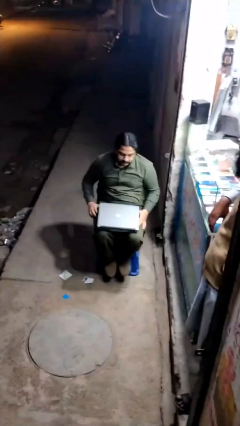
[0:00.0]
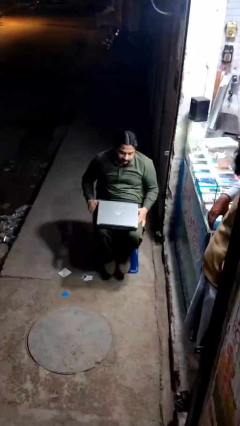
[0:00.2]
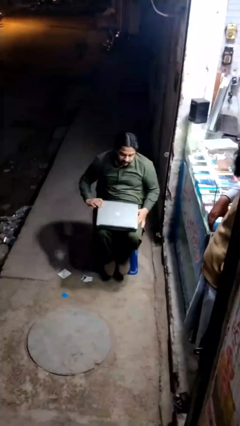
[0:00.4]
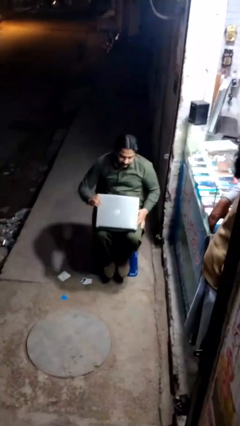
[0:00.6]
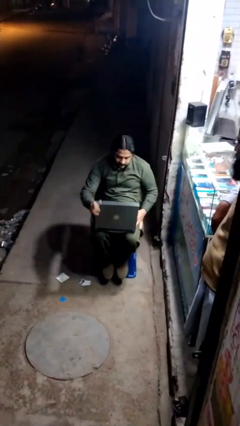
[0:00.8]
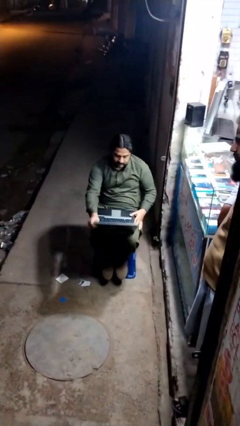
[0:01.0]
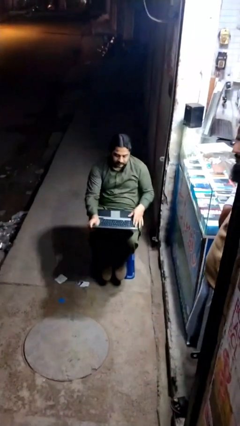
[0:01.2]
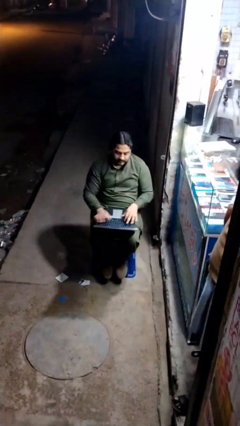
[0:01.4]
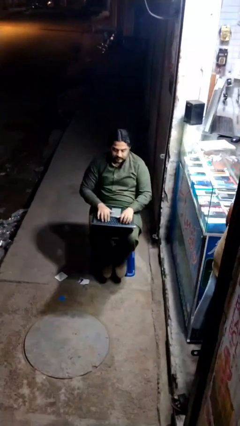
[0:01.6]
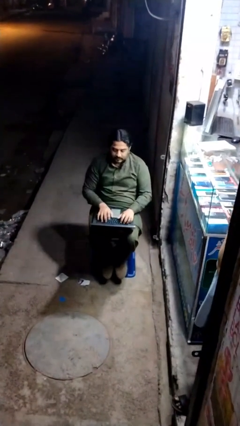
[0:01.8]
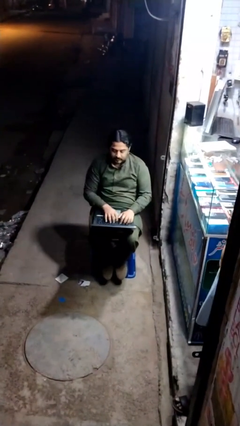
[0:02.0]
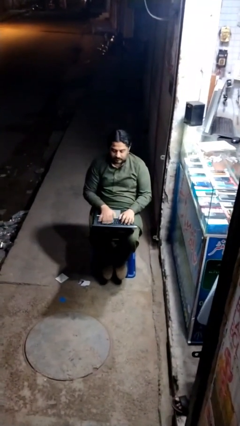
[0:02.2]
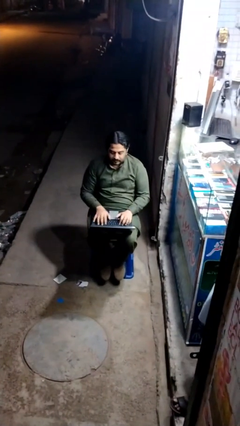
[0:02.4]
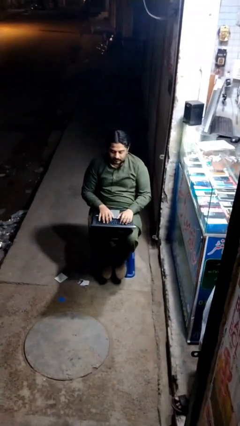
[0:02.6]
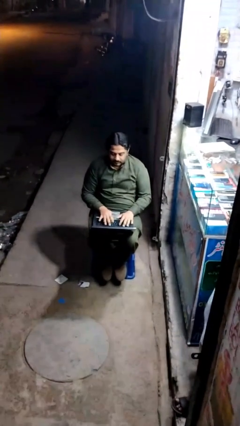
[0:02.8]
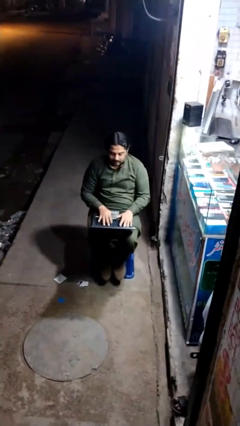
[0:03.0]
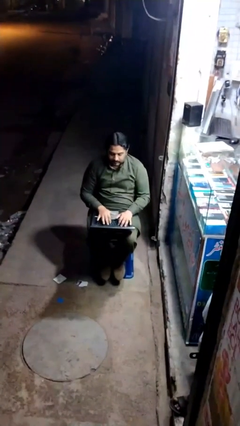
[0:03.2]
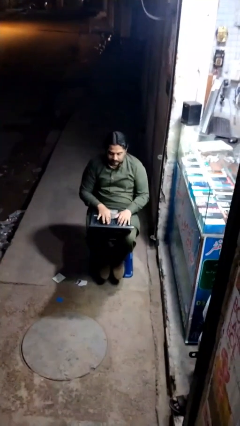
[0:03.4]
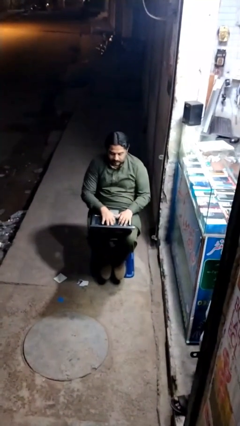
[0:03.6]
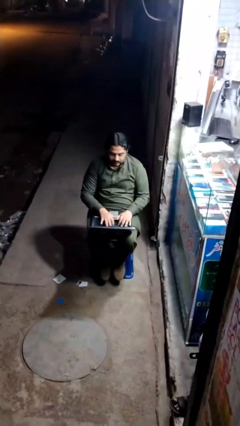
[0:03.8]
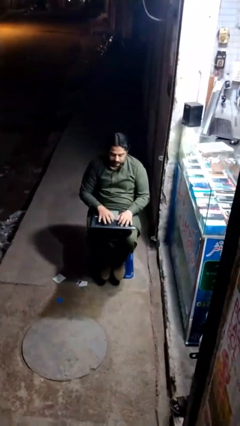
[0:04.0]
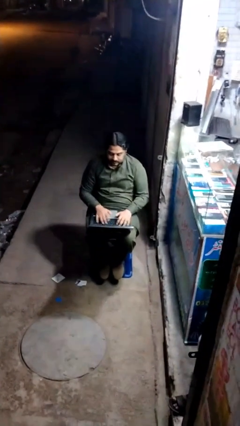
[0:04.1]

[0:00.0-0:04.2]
person interacts with laptop

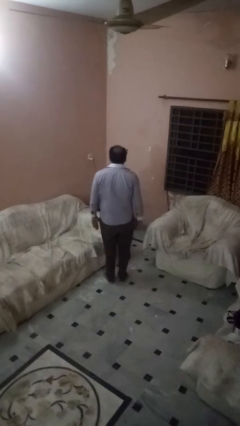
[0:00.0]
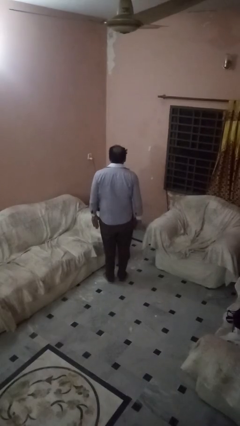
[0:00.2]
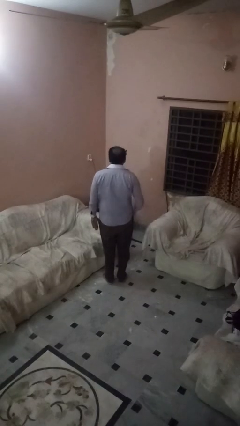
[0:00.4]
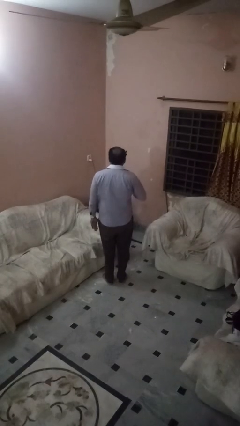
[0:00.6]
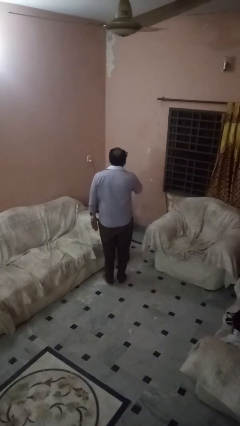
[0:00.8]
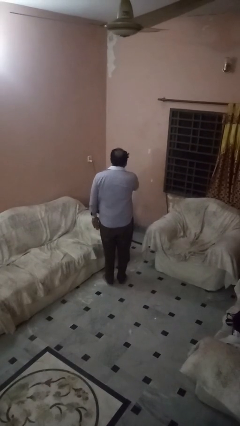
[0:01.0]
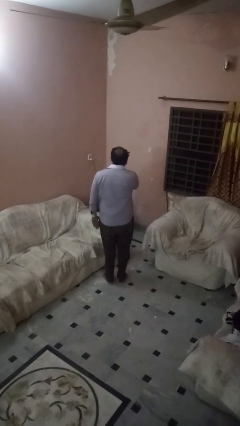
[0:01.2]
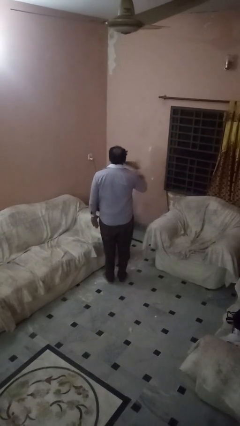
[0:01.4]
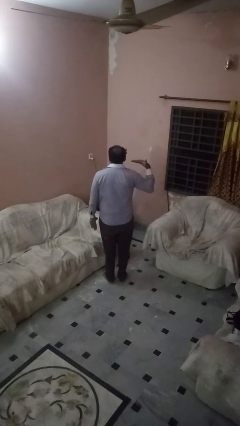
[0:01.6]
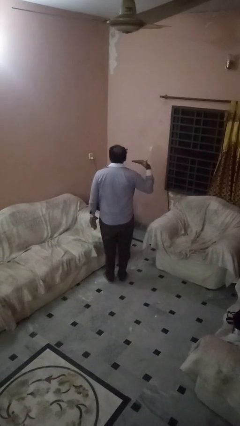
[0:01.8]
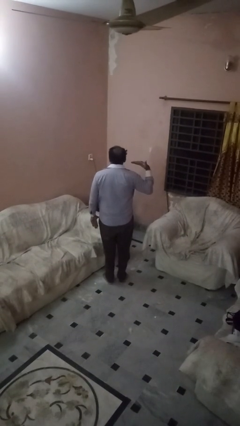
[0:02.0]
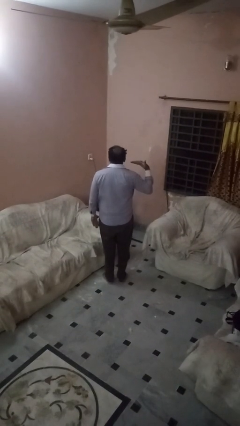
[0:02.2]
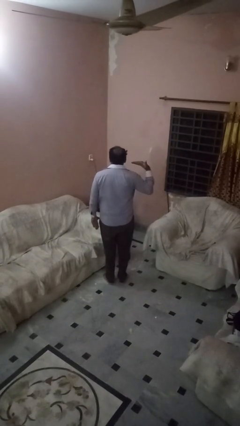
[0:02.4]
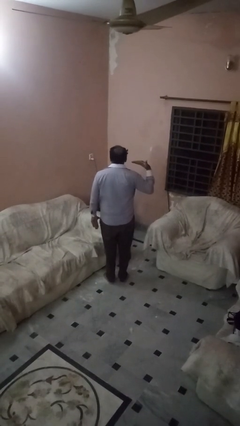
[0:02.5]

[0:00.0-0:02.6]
person gestures cut

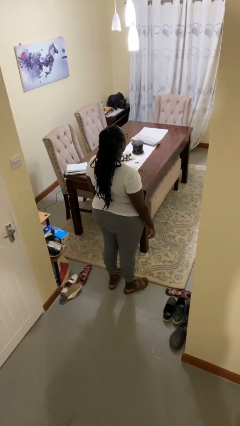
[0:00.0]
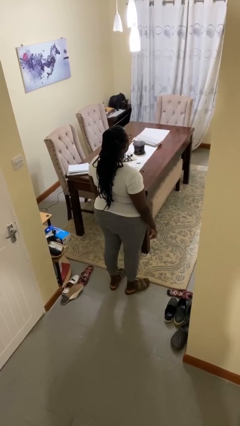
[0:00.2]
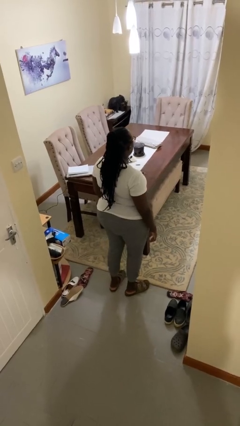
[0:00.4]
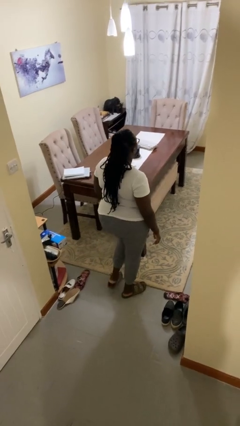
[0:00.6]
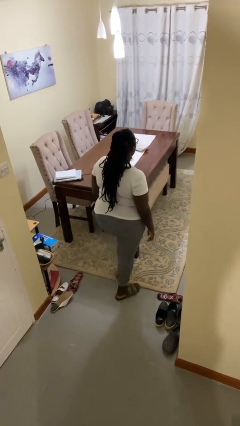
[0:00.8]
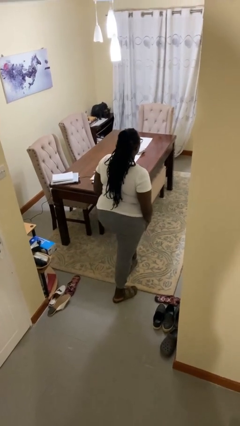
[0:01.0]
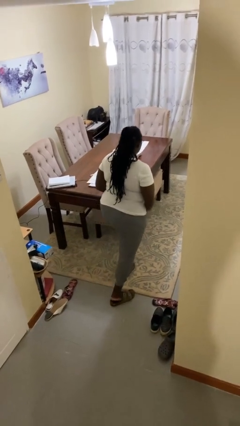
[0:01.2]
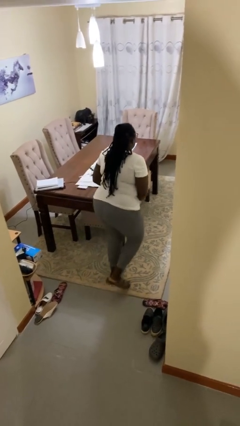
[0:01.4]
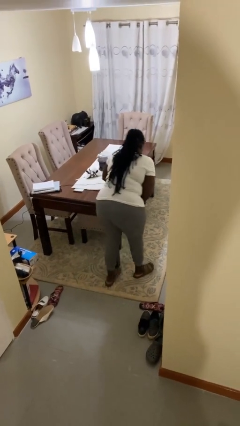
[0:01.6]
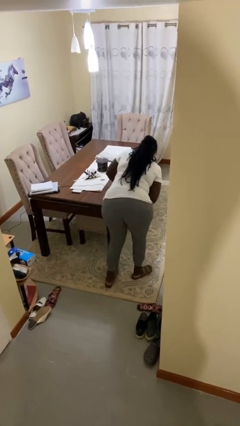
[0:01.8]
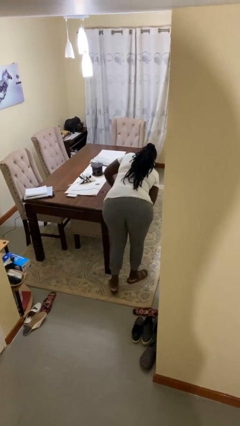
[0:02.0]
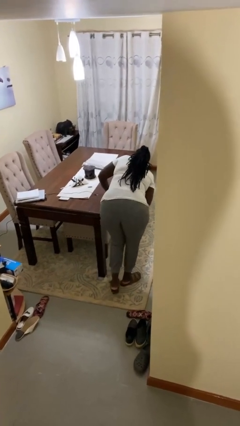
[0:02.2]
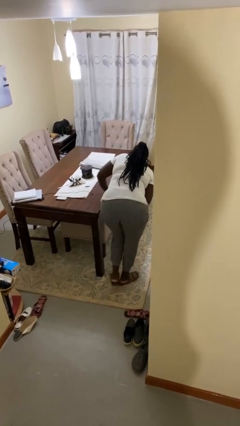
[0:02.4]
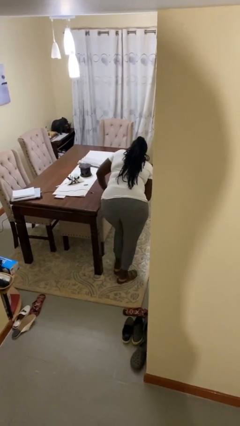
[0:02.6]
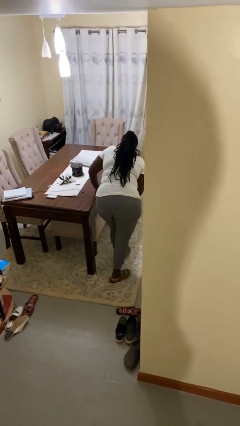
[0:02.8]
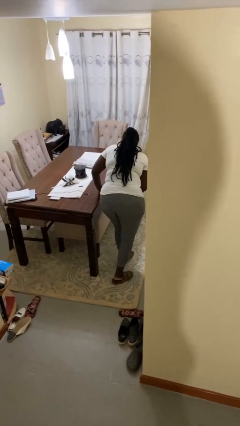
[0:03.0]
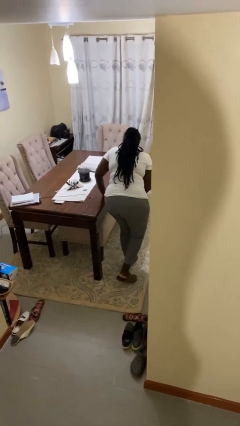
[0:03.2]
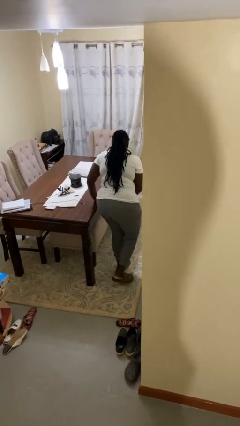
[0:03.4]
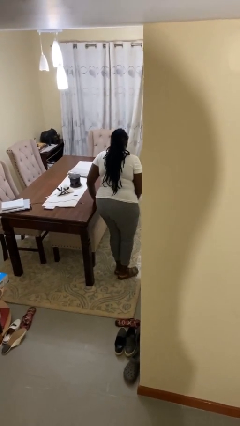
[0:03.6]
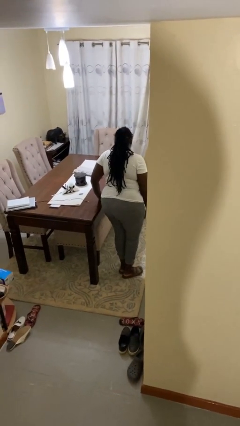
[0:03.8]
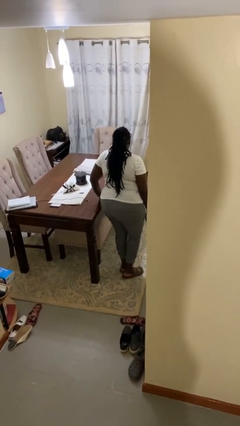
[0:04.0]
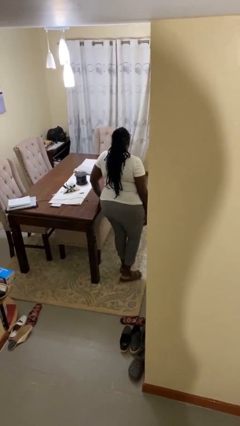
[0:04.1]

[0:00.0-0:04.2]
person bumps into table

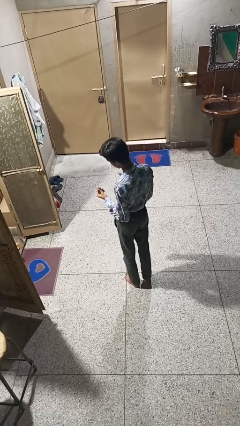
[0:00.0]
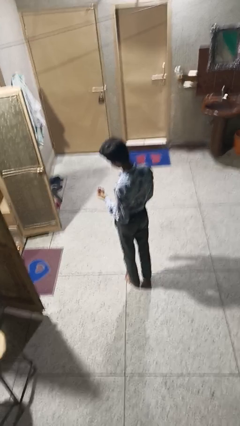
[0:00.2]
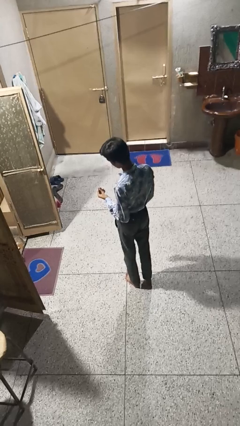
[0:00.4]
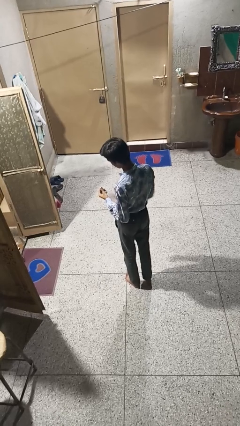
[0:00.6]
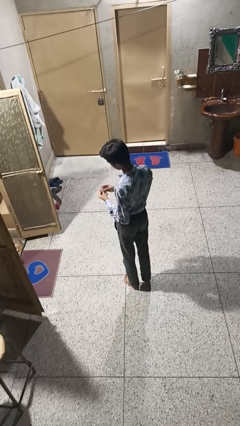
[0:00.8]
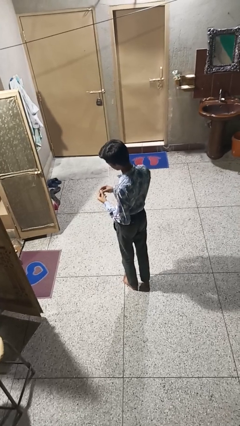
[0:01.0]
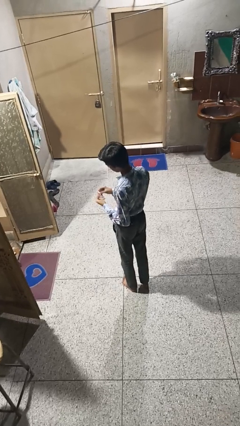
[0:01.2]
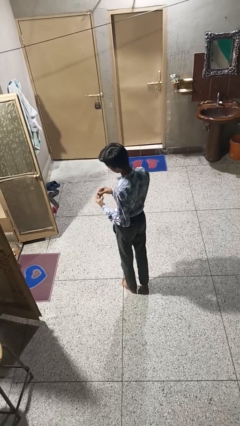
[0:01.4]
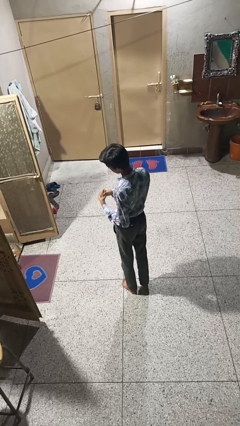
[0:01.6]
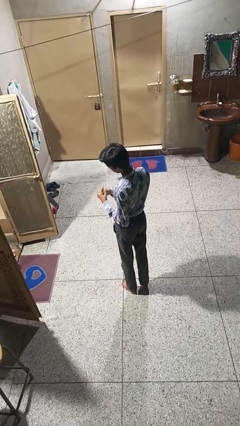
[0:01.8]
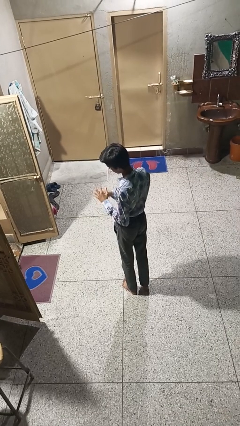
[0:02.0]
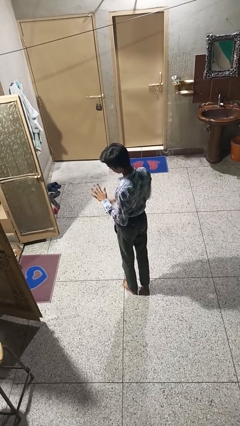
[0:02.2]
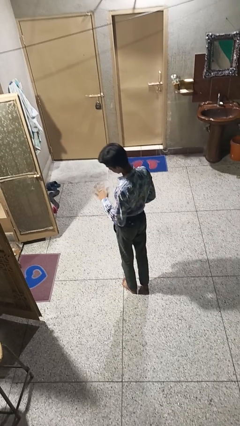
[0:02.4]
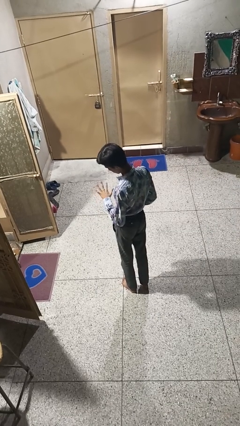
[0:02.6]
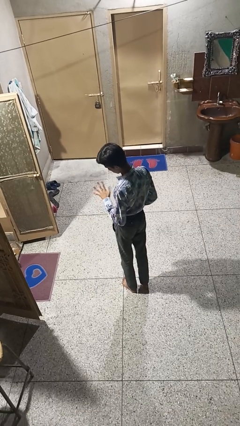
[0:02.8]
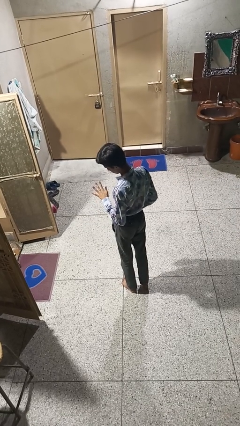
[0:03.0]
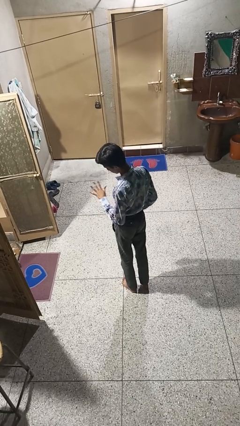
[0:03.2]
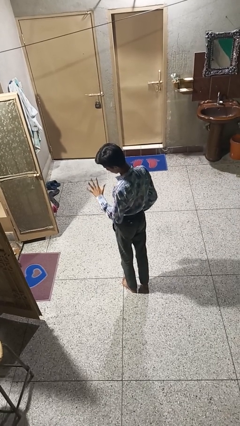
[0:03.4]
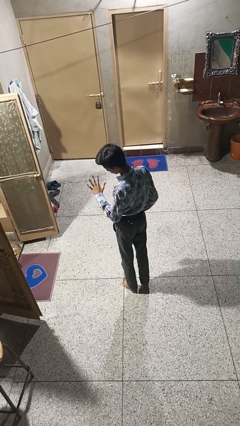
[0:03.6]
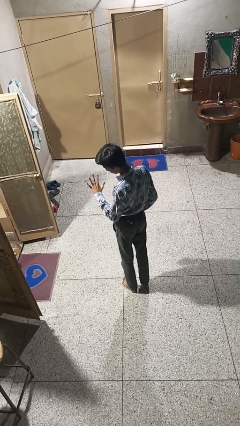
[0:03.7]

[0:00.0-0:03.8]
person puts on ring

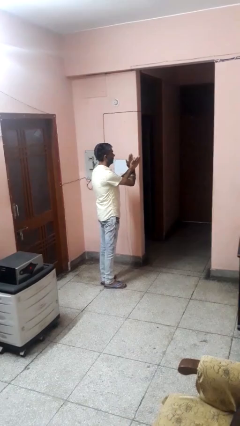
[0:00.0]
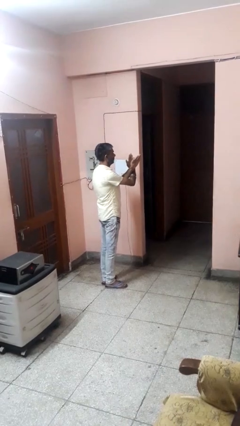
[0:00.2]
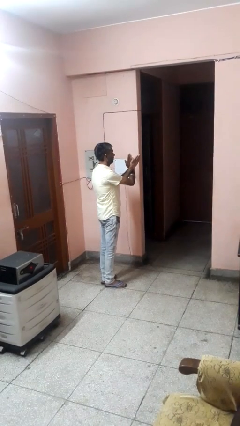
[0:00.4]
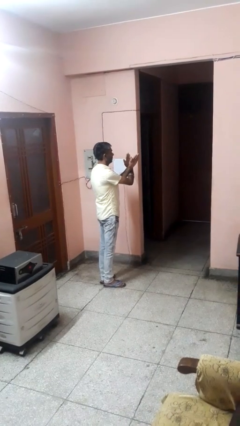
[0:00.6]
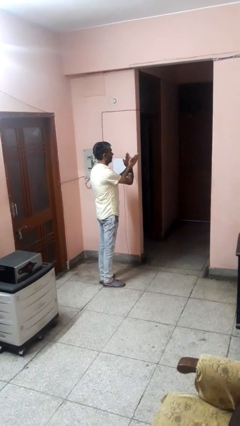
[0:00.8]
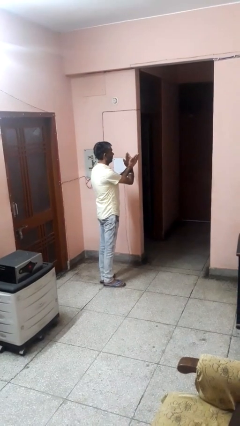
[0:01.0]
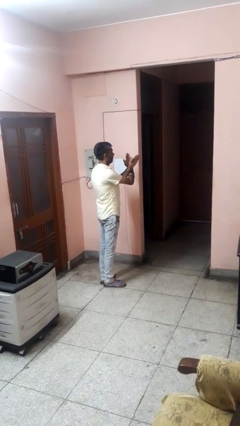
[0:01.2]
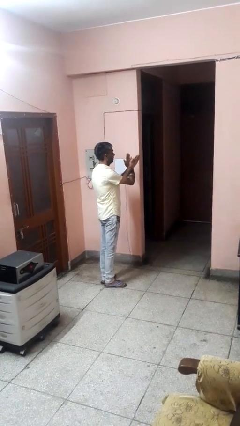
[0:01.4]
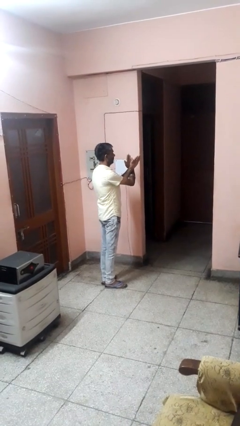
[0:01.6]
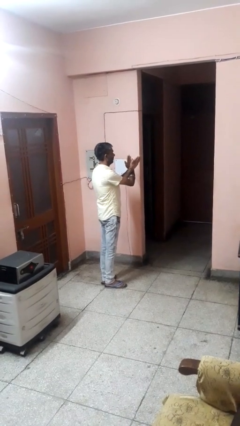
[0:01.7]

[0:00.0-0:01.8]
person gestures arms x

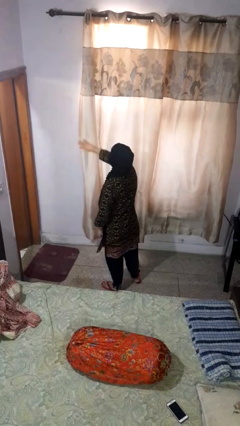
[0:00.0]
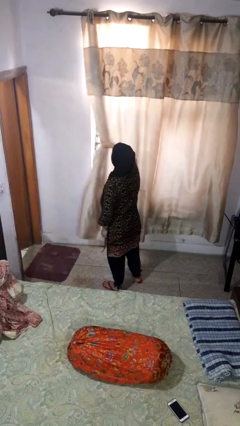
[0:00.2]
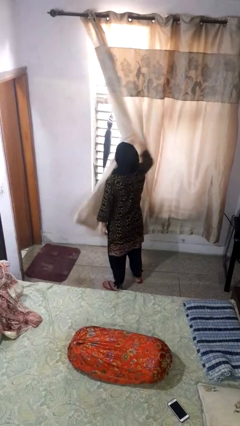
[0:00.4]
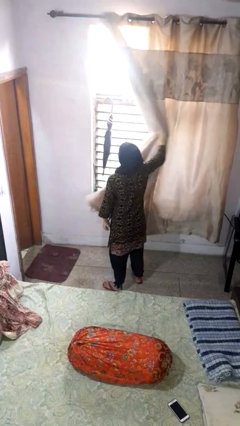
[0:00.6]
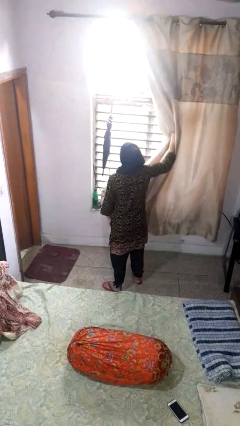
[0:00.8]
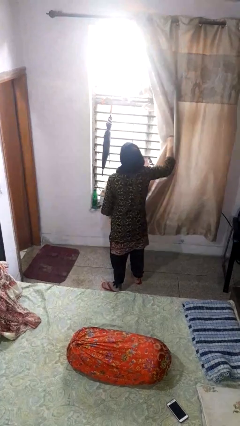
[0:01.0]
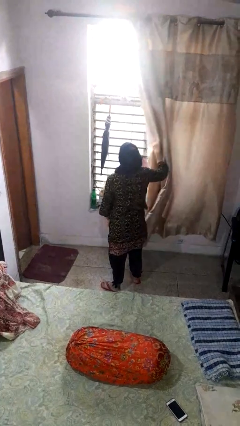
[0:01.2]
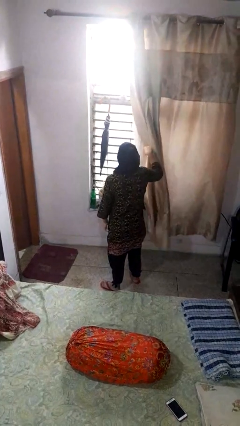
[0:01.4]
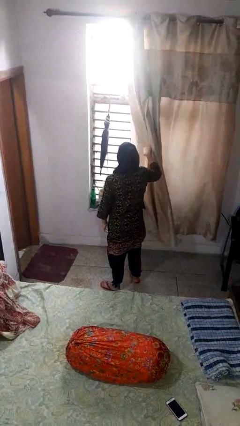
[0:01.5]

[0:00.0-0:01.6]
person opens curtains
